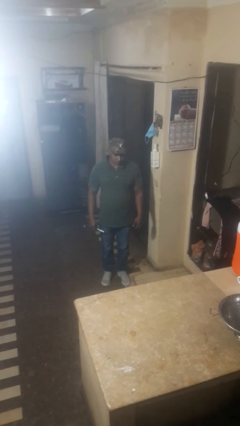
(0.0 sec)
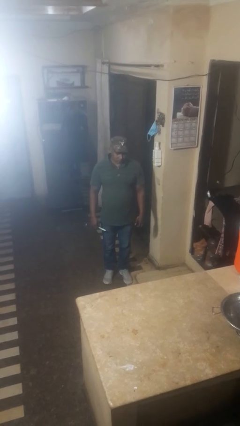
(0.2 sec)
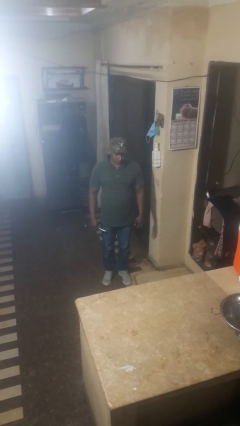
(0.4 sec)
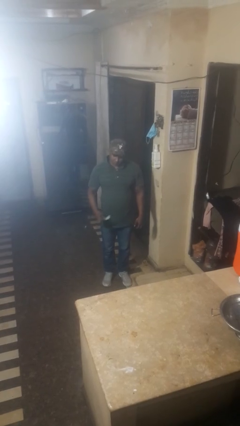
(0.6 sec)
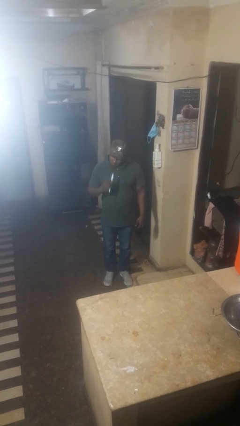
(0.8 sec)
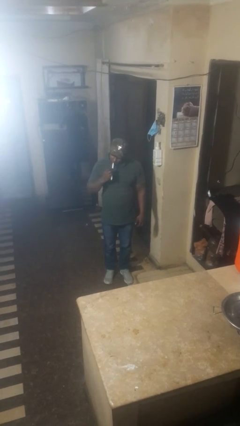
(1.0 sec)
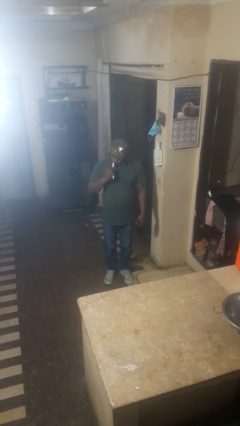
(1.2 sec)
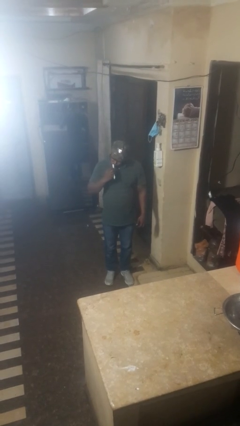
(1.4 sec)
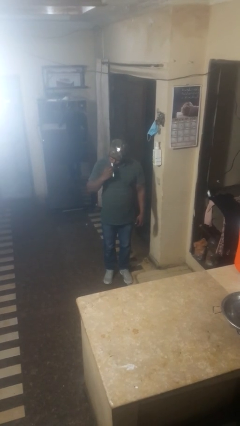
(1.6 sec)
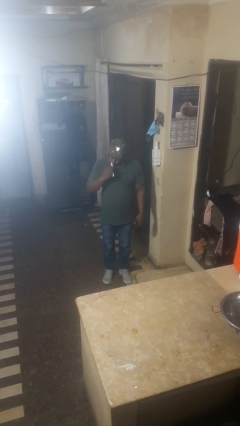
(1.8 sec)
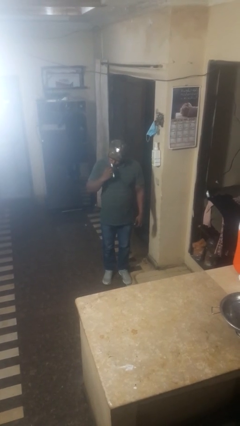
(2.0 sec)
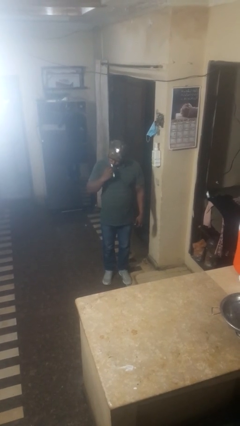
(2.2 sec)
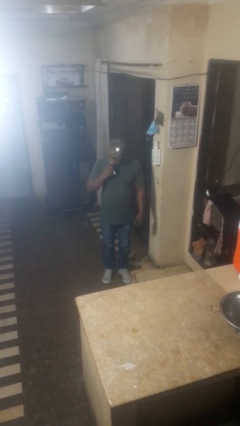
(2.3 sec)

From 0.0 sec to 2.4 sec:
person brushes teeth

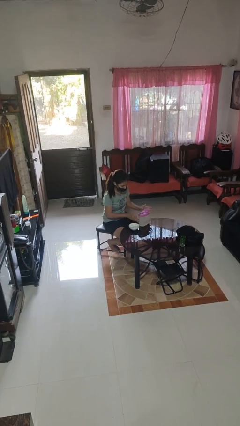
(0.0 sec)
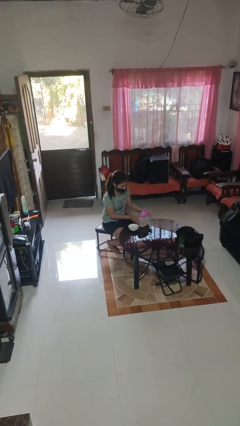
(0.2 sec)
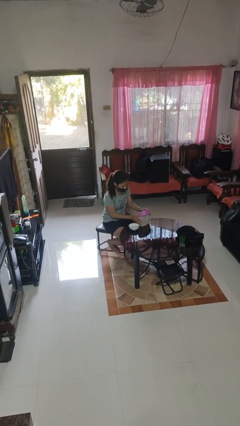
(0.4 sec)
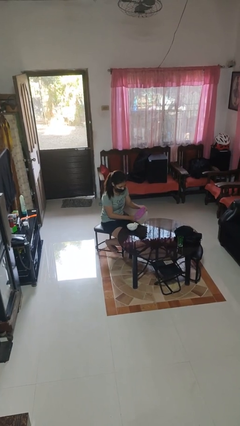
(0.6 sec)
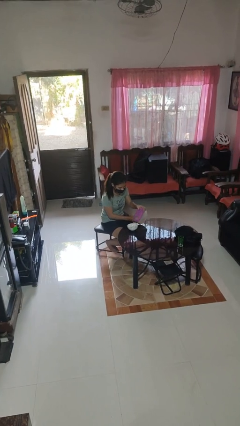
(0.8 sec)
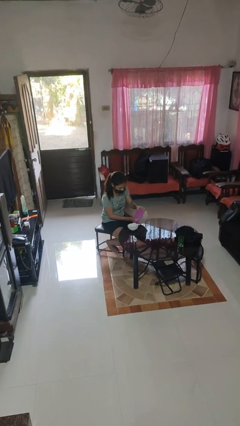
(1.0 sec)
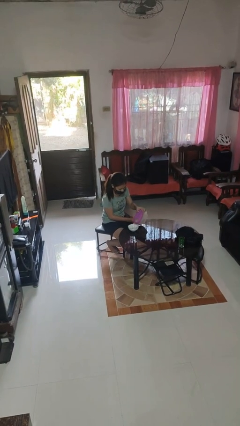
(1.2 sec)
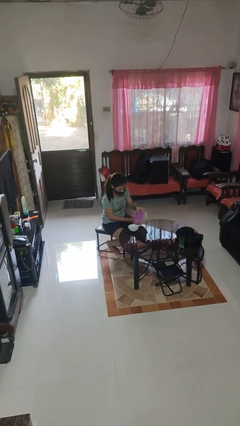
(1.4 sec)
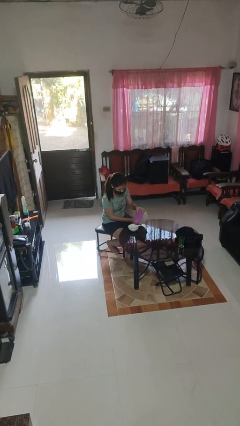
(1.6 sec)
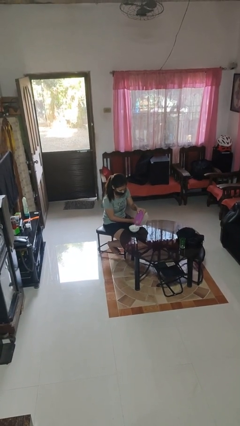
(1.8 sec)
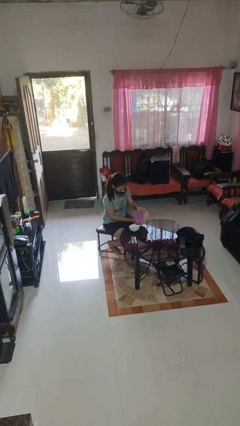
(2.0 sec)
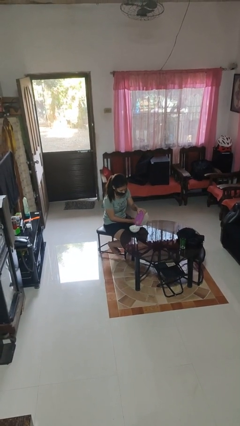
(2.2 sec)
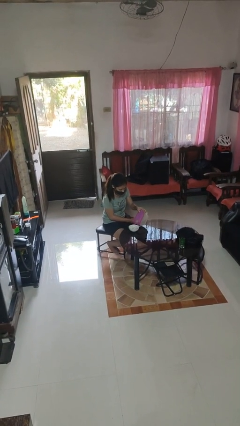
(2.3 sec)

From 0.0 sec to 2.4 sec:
person pours into bowl

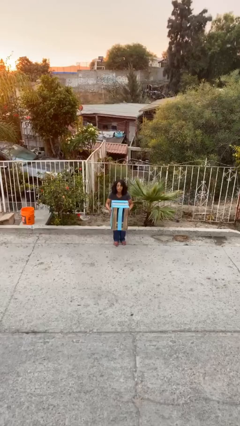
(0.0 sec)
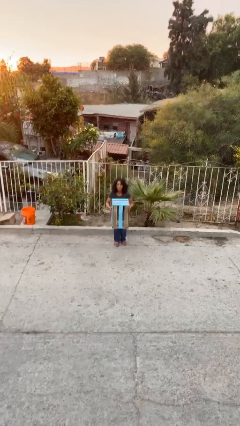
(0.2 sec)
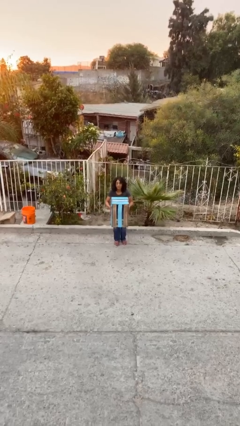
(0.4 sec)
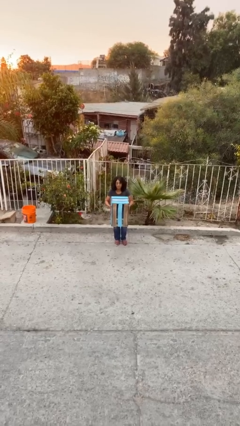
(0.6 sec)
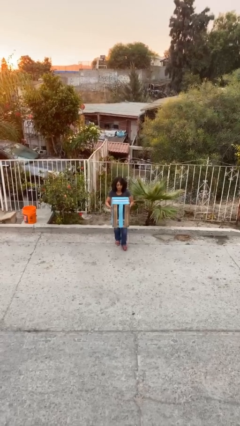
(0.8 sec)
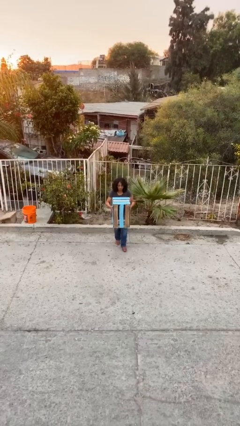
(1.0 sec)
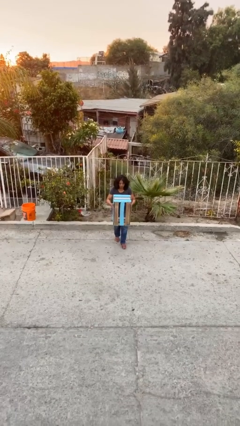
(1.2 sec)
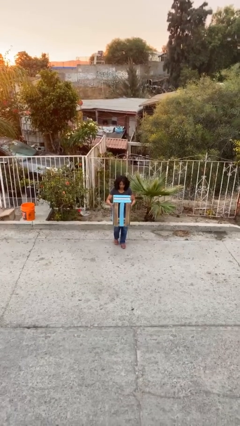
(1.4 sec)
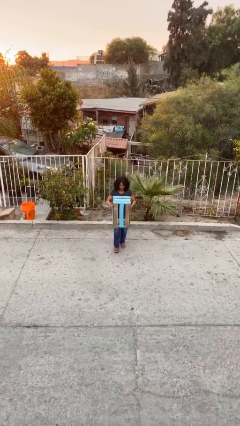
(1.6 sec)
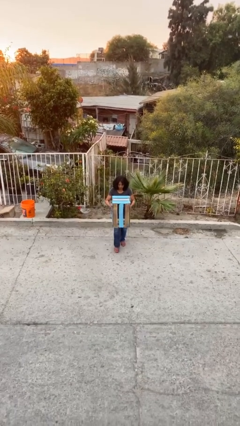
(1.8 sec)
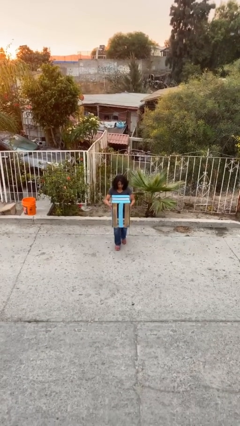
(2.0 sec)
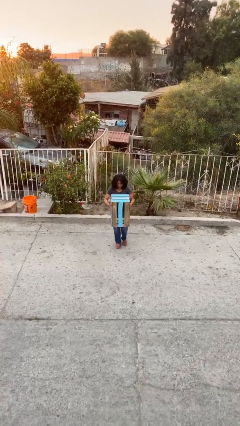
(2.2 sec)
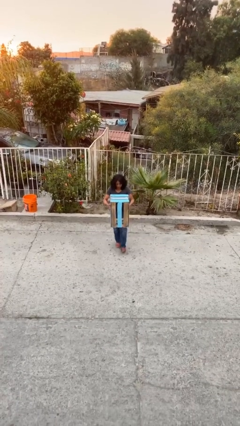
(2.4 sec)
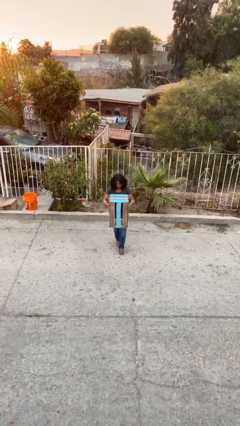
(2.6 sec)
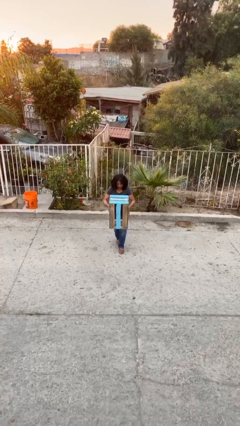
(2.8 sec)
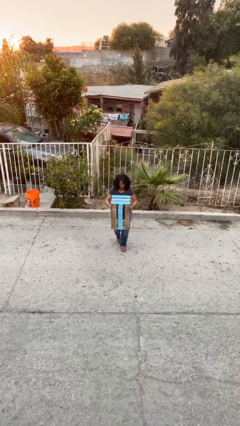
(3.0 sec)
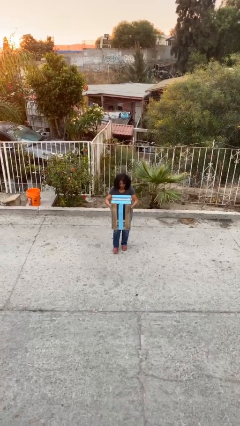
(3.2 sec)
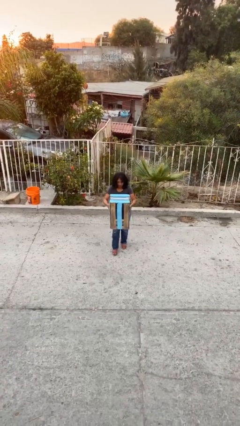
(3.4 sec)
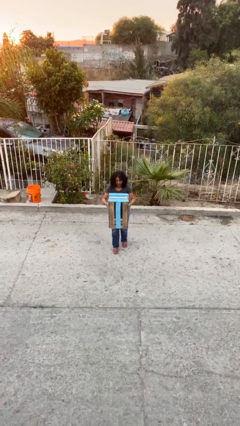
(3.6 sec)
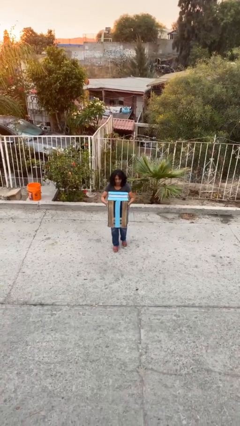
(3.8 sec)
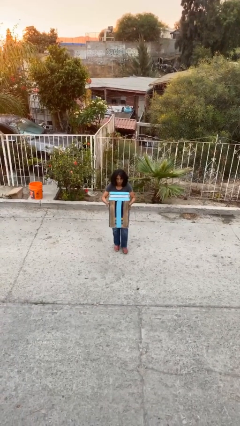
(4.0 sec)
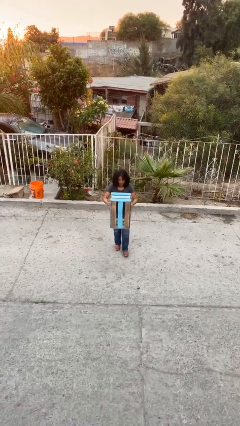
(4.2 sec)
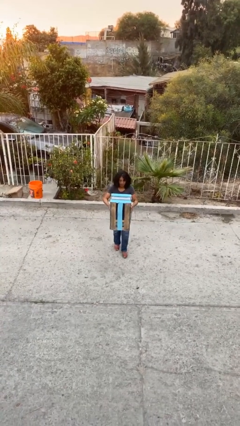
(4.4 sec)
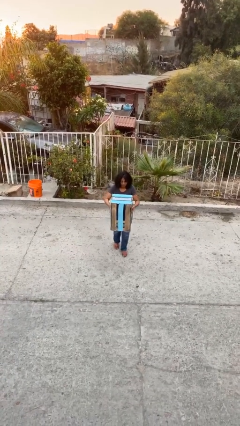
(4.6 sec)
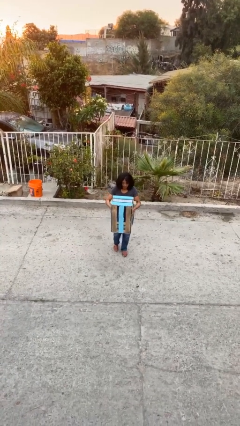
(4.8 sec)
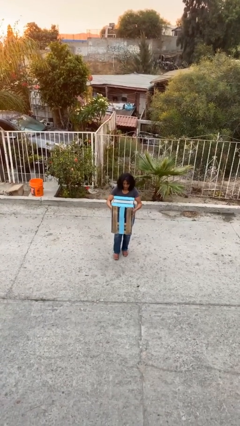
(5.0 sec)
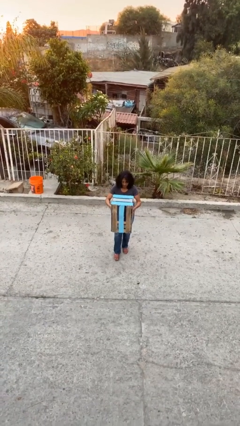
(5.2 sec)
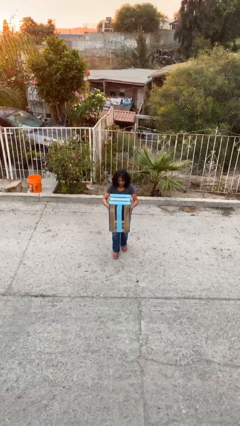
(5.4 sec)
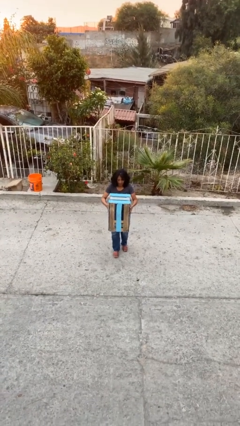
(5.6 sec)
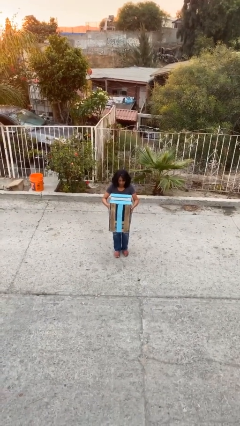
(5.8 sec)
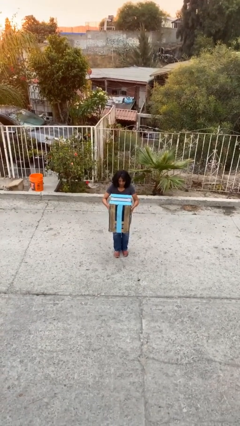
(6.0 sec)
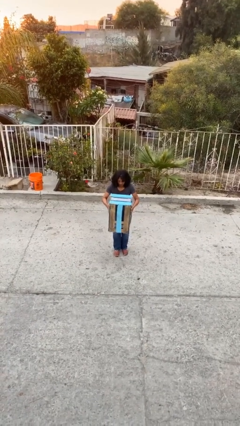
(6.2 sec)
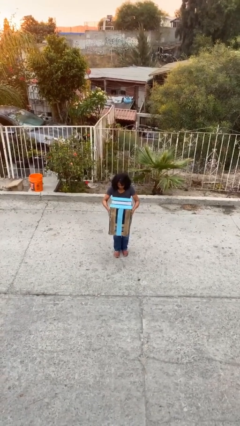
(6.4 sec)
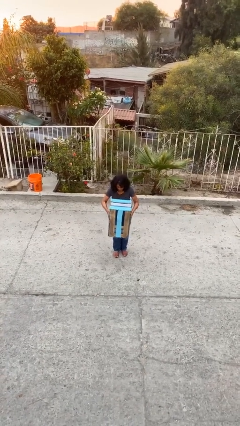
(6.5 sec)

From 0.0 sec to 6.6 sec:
person carries heavy object

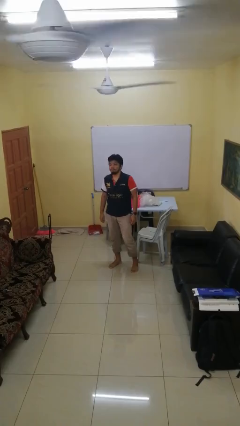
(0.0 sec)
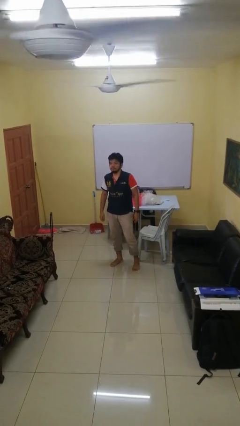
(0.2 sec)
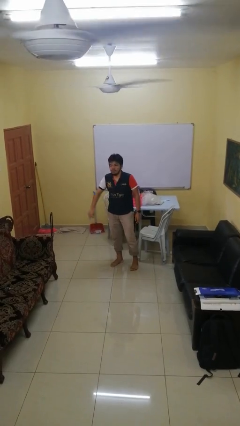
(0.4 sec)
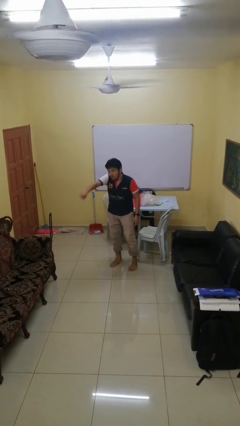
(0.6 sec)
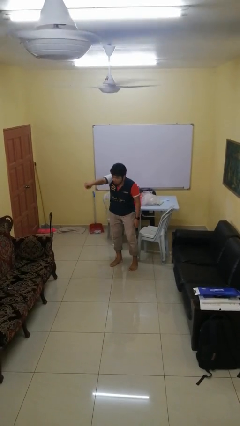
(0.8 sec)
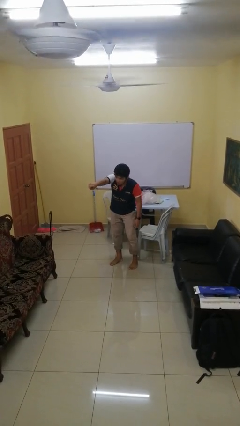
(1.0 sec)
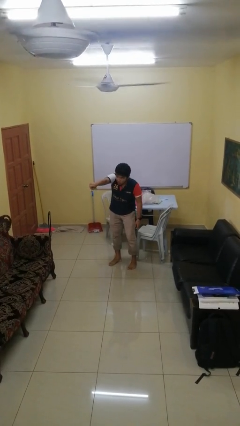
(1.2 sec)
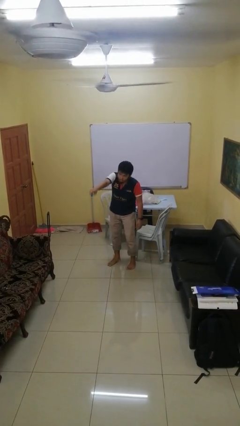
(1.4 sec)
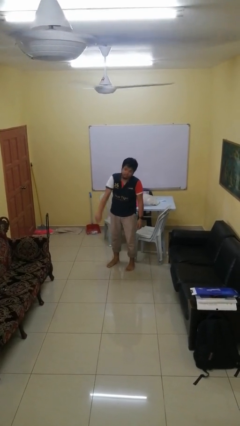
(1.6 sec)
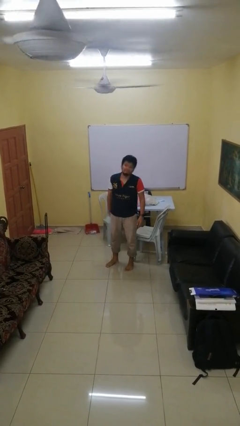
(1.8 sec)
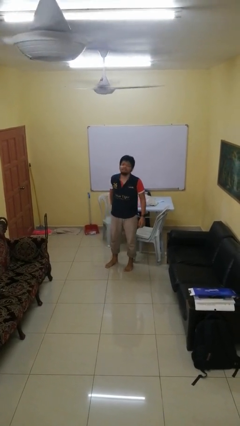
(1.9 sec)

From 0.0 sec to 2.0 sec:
person points at person

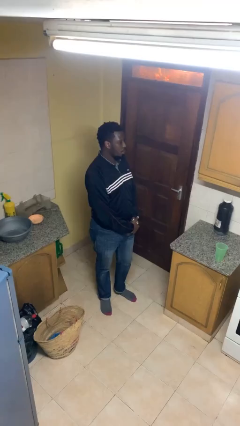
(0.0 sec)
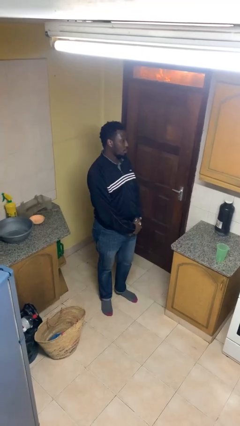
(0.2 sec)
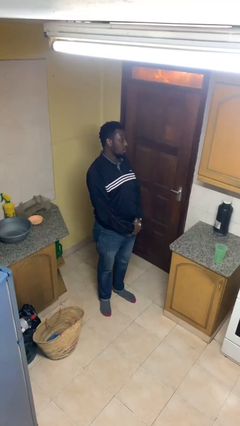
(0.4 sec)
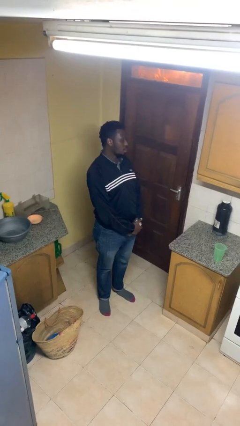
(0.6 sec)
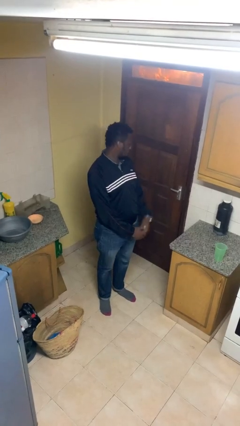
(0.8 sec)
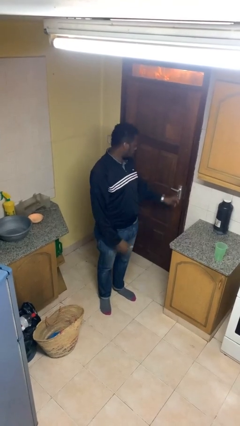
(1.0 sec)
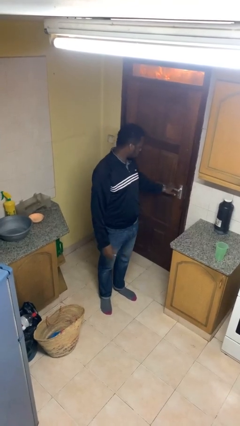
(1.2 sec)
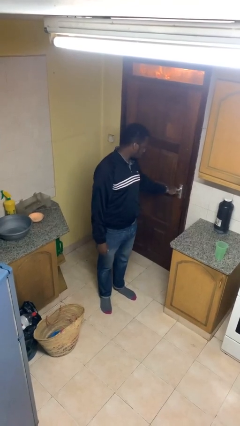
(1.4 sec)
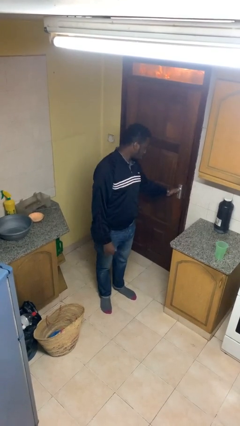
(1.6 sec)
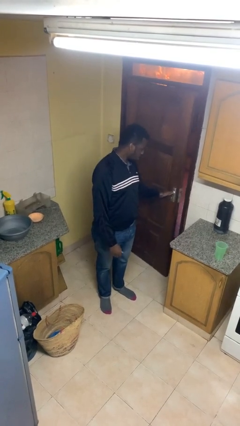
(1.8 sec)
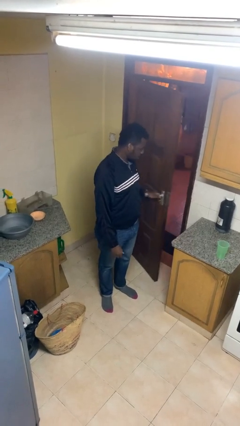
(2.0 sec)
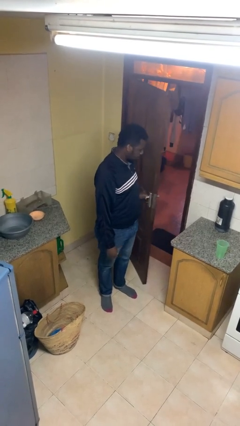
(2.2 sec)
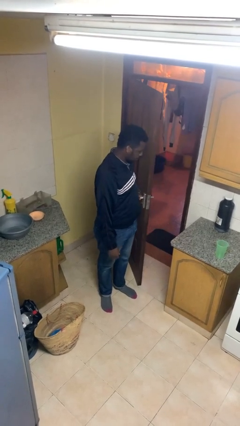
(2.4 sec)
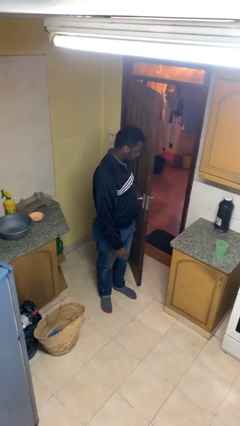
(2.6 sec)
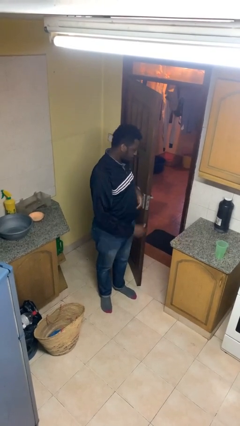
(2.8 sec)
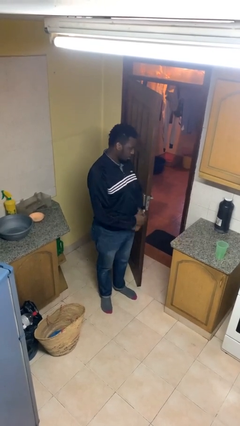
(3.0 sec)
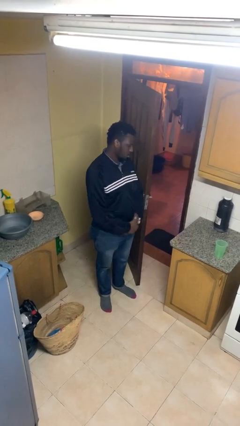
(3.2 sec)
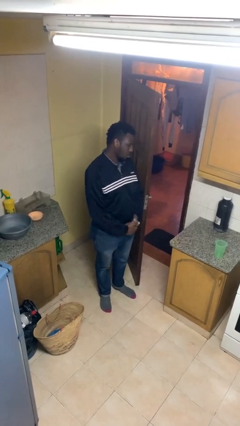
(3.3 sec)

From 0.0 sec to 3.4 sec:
person opens facility door

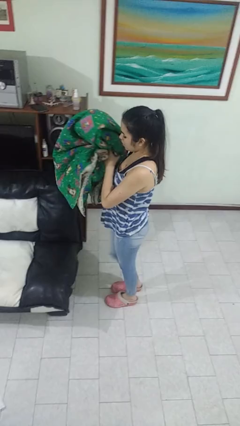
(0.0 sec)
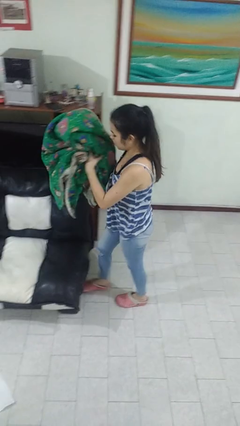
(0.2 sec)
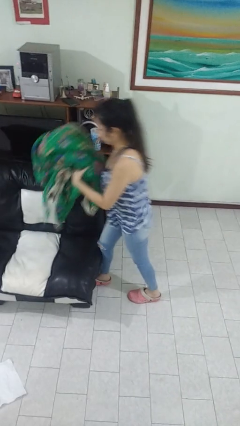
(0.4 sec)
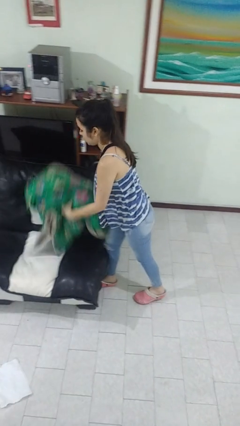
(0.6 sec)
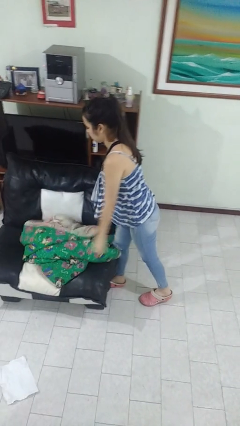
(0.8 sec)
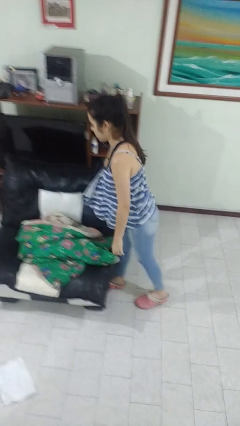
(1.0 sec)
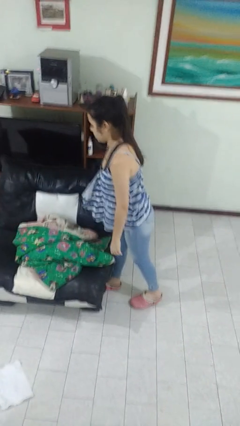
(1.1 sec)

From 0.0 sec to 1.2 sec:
person puts down object on couch
